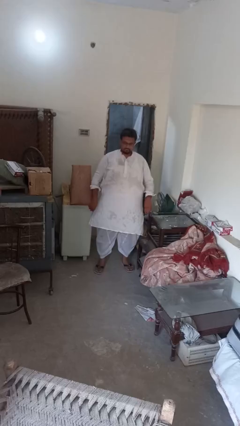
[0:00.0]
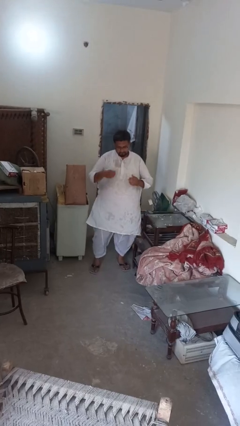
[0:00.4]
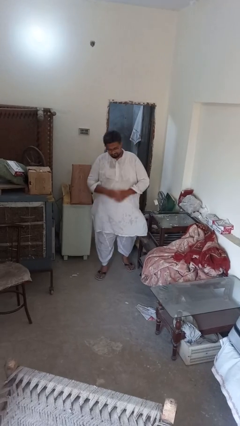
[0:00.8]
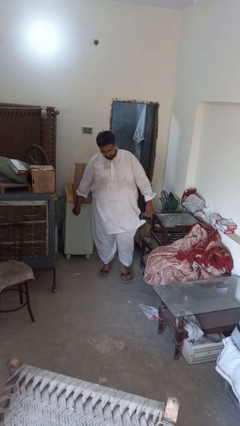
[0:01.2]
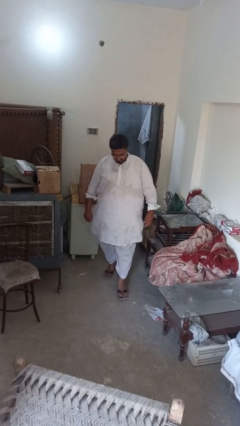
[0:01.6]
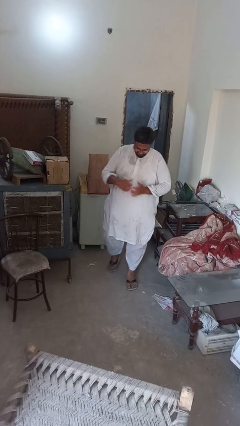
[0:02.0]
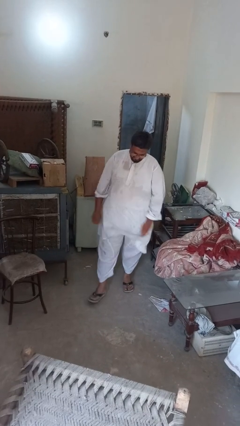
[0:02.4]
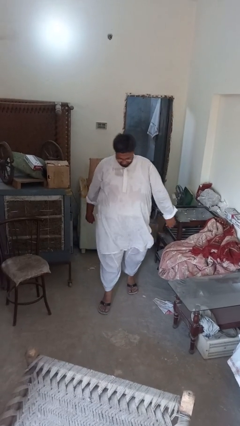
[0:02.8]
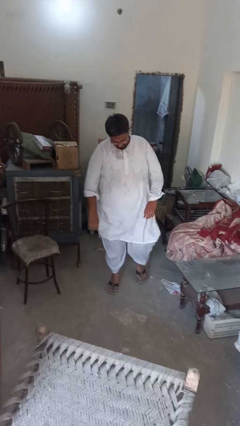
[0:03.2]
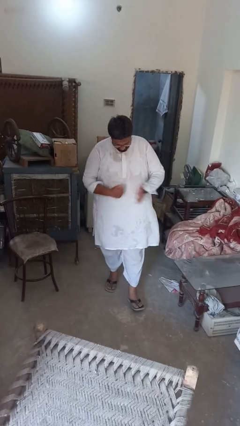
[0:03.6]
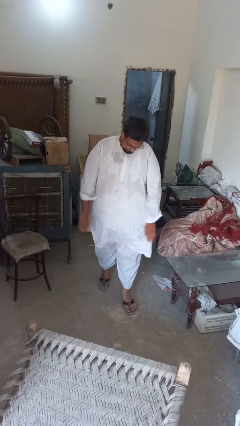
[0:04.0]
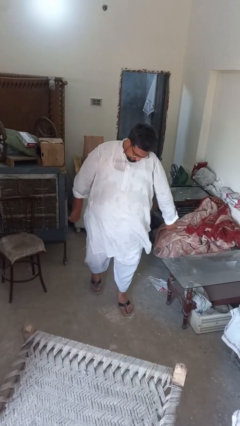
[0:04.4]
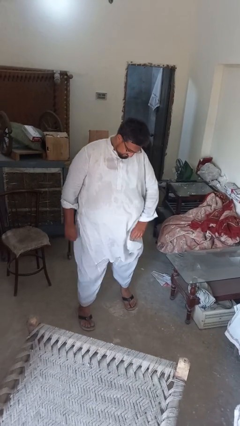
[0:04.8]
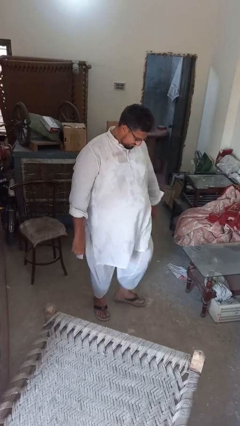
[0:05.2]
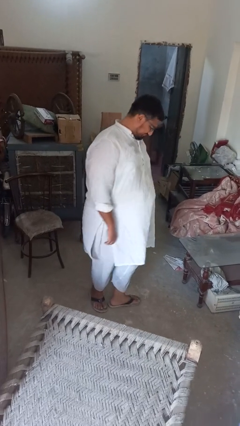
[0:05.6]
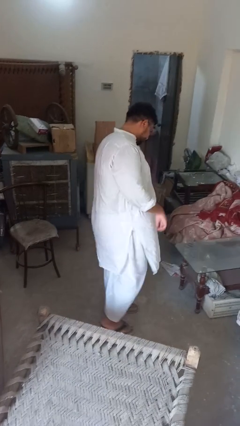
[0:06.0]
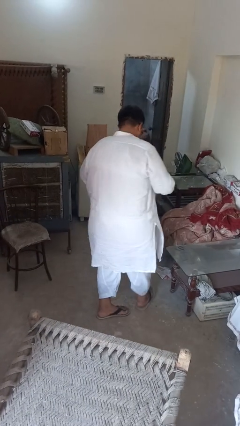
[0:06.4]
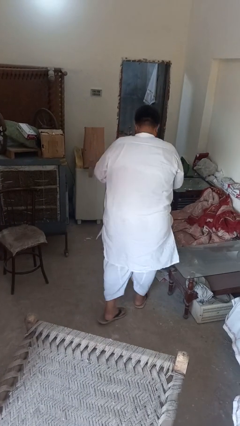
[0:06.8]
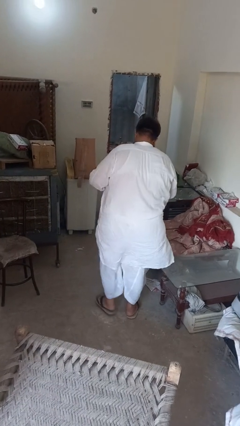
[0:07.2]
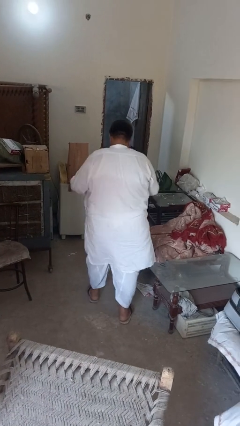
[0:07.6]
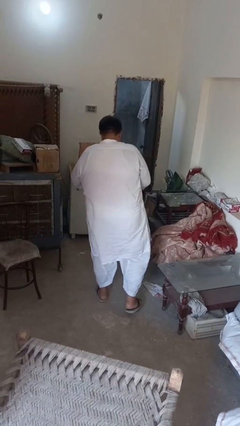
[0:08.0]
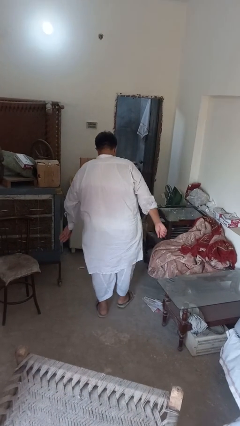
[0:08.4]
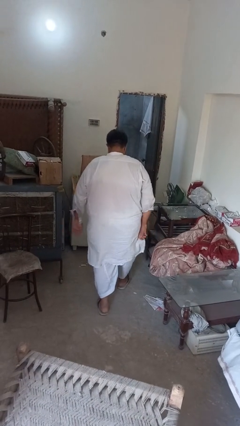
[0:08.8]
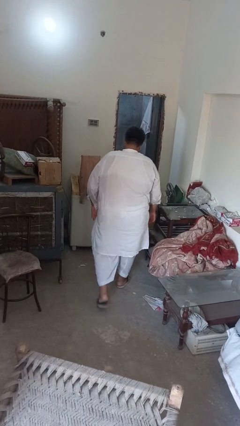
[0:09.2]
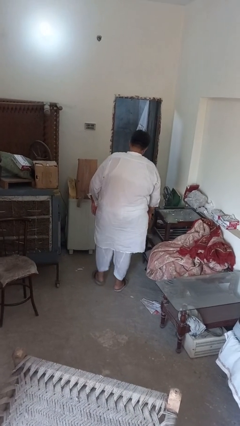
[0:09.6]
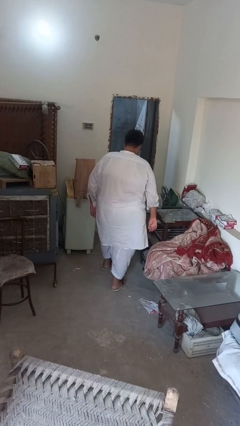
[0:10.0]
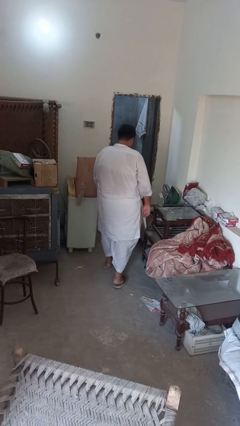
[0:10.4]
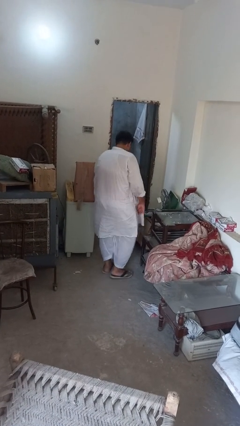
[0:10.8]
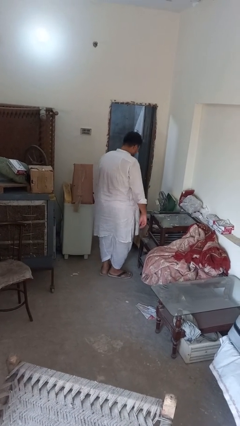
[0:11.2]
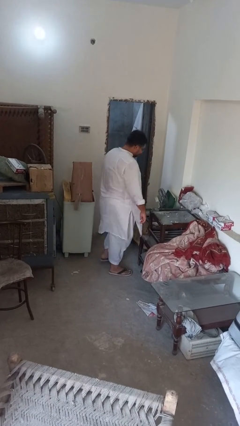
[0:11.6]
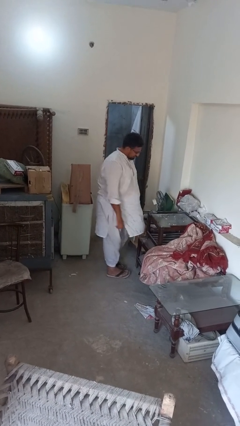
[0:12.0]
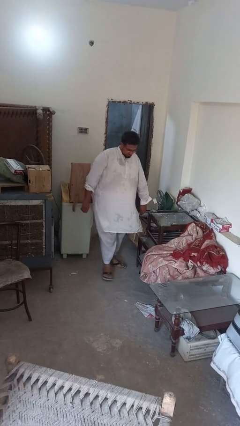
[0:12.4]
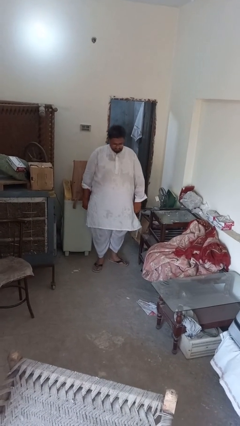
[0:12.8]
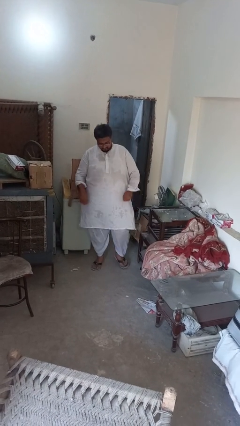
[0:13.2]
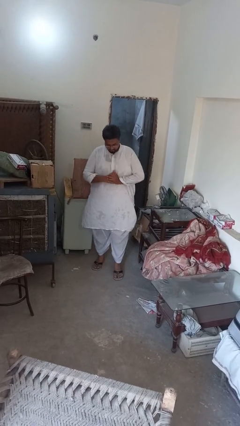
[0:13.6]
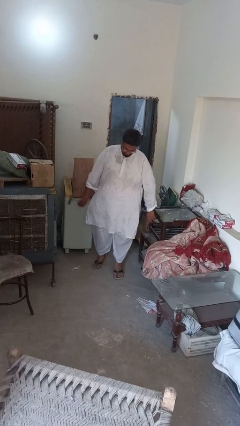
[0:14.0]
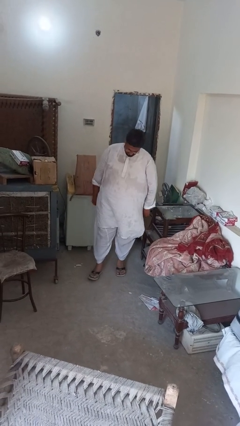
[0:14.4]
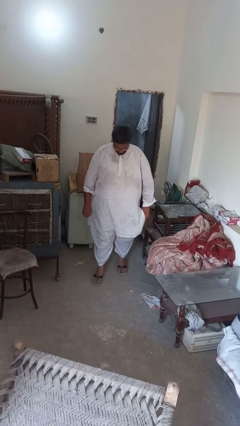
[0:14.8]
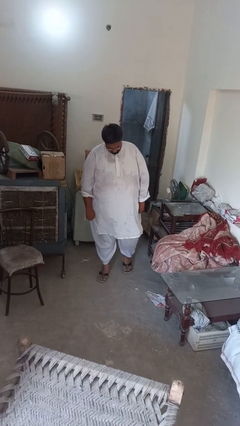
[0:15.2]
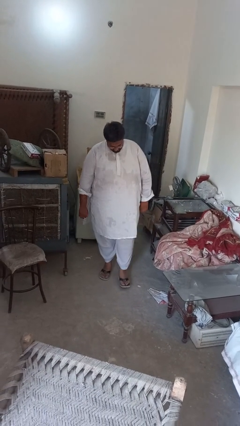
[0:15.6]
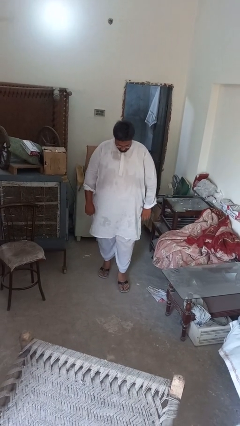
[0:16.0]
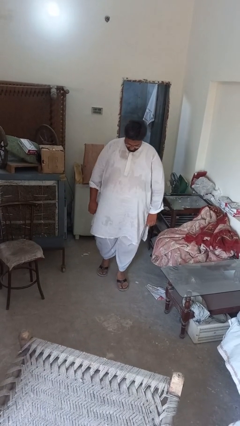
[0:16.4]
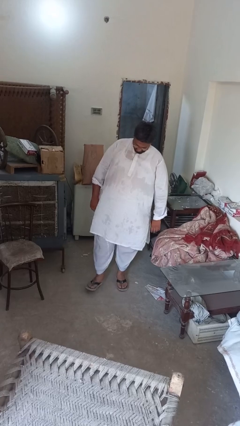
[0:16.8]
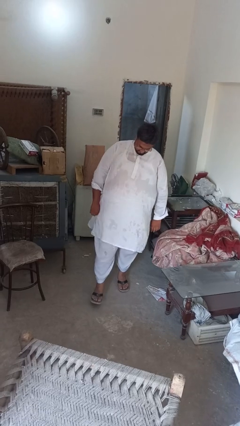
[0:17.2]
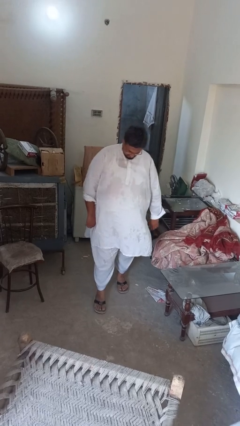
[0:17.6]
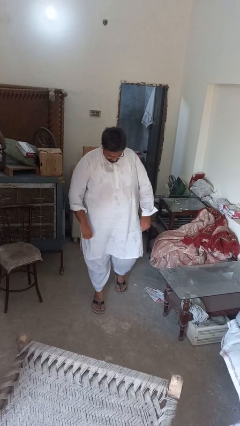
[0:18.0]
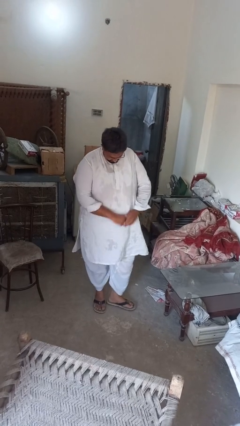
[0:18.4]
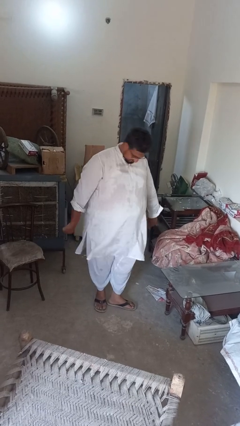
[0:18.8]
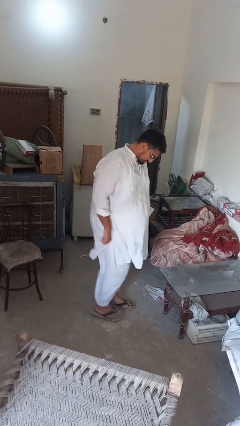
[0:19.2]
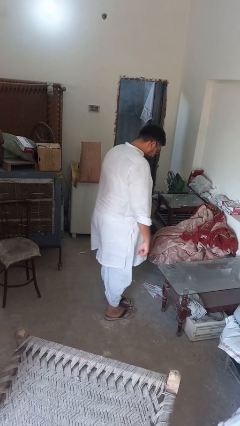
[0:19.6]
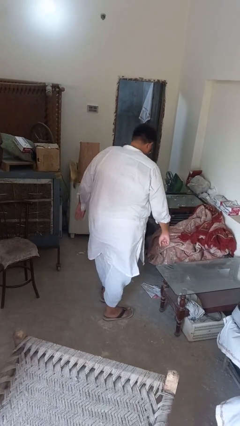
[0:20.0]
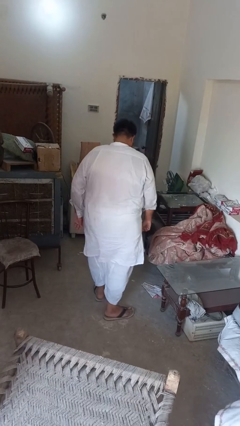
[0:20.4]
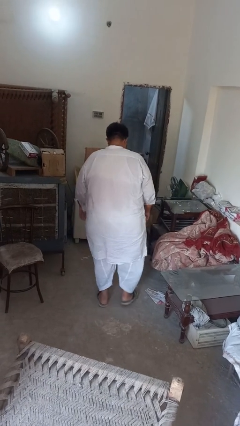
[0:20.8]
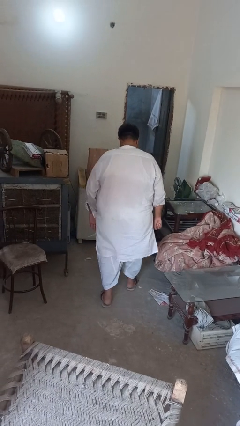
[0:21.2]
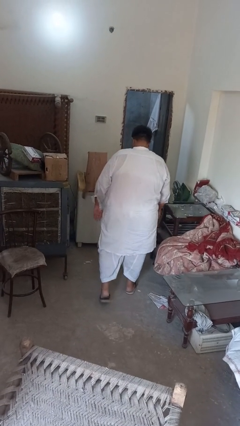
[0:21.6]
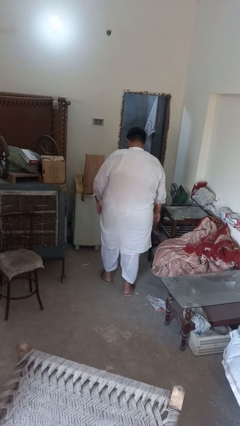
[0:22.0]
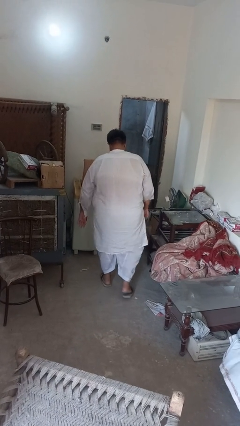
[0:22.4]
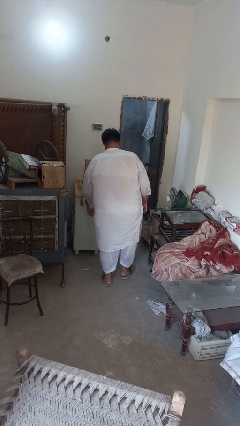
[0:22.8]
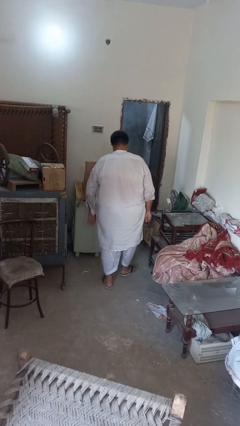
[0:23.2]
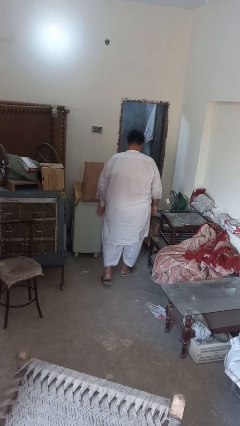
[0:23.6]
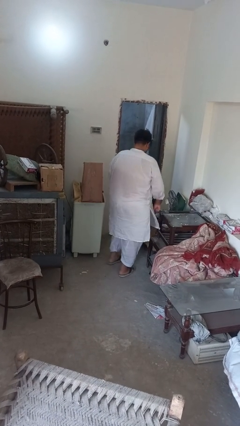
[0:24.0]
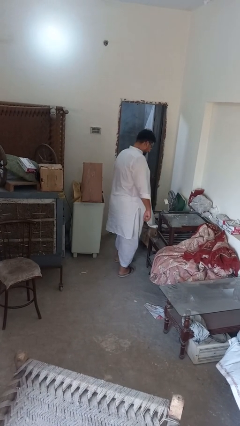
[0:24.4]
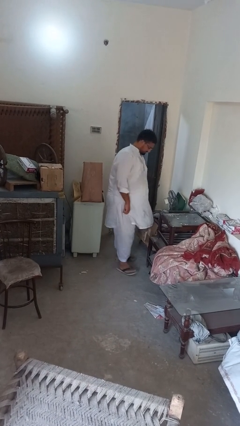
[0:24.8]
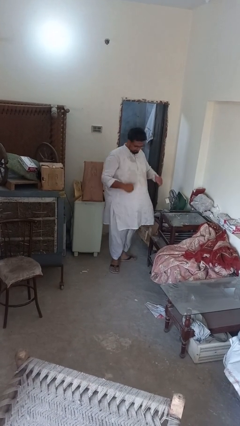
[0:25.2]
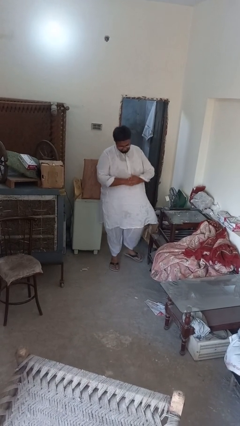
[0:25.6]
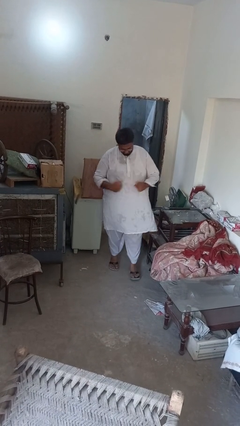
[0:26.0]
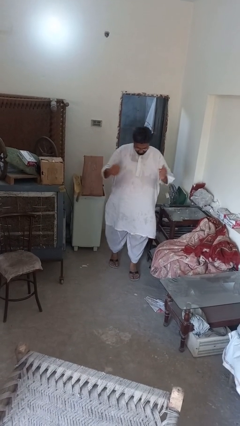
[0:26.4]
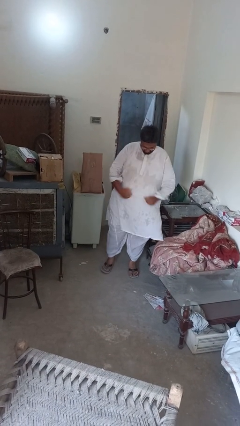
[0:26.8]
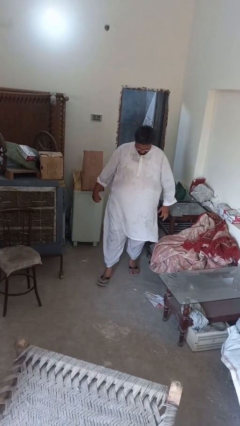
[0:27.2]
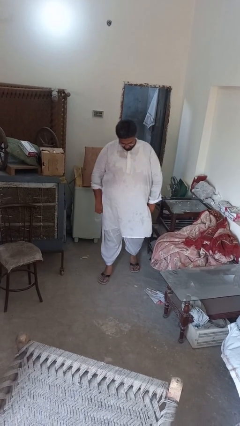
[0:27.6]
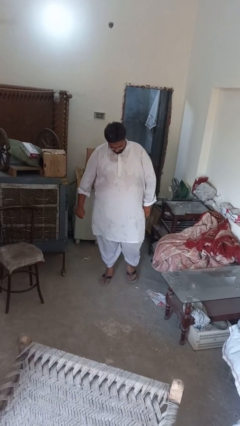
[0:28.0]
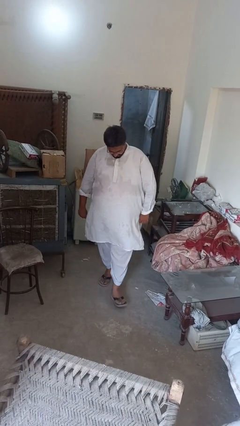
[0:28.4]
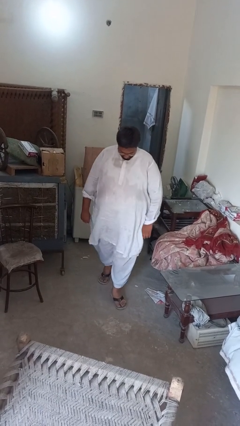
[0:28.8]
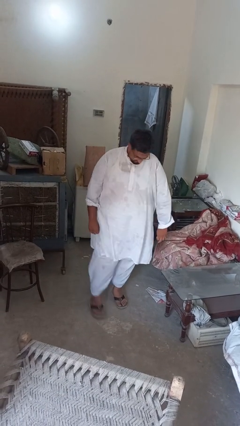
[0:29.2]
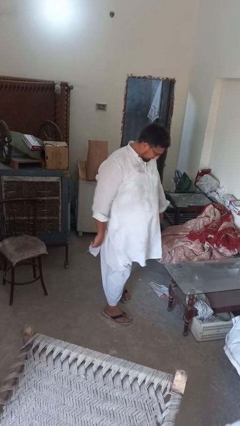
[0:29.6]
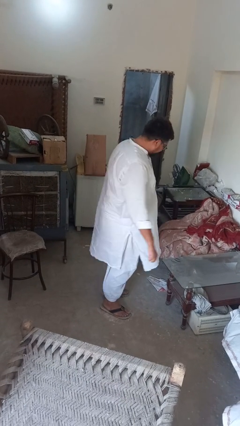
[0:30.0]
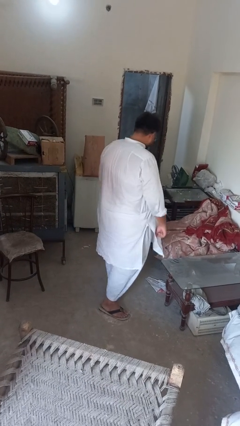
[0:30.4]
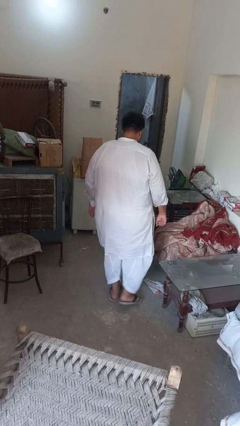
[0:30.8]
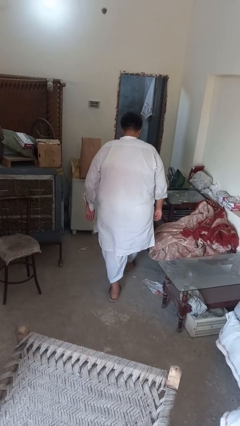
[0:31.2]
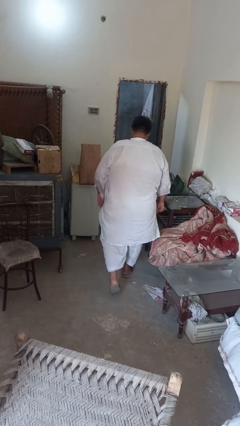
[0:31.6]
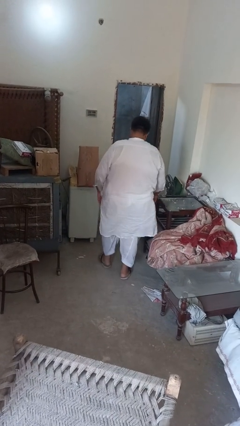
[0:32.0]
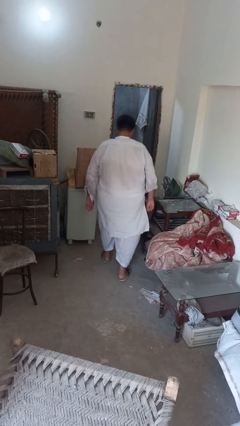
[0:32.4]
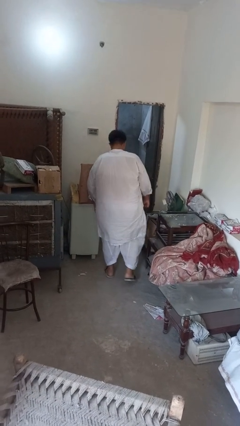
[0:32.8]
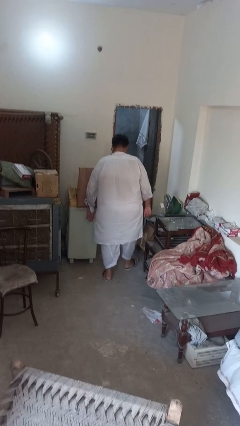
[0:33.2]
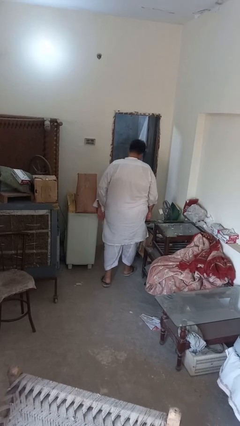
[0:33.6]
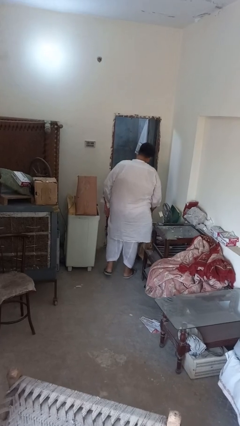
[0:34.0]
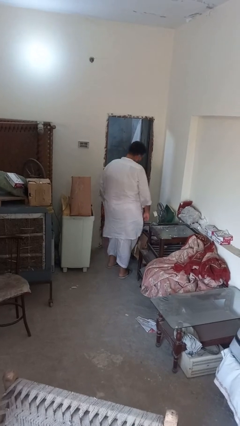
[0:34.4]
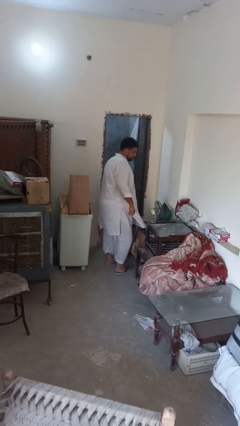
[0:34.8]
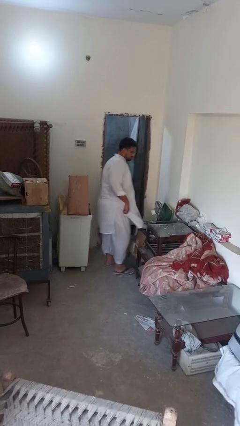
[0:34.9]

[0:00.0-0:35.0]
person twirls

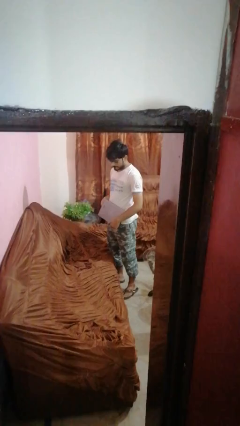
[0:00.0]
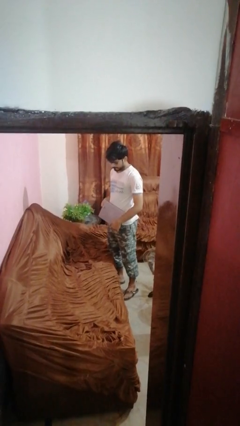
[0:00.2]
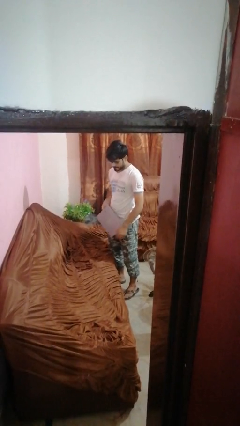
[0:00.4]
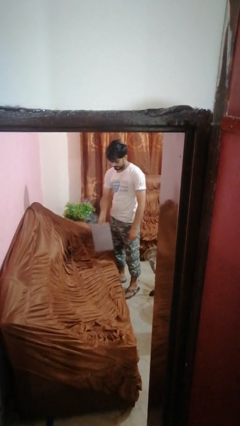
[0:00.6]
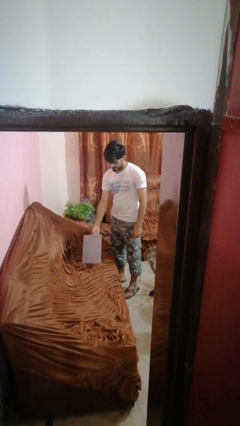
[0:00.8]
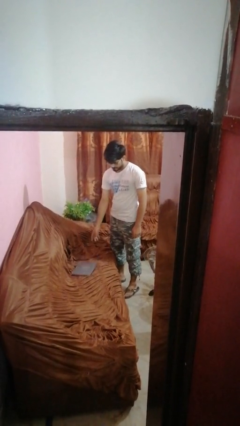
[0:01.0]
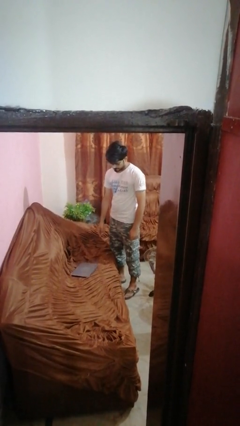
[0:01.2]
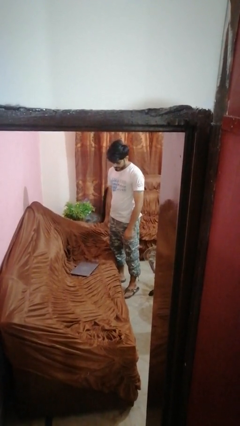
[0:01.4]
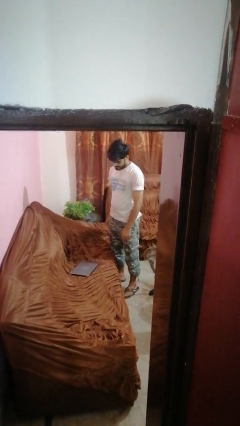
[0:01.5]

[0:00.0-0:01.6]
person puts down object on couch
